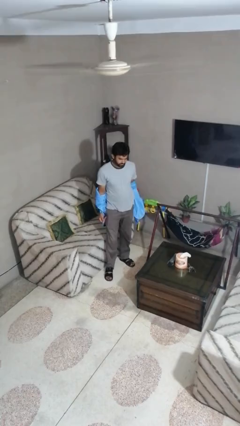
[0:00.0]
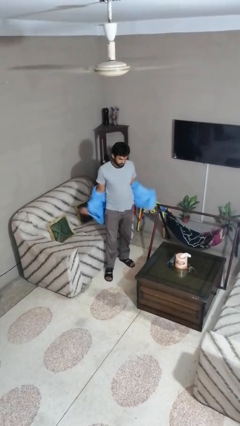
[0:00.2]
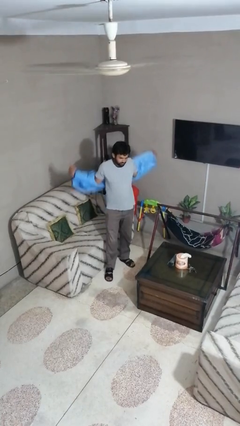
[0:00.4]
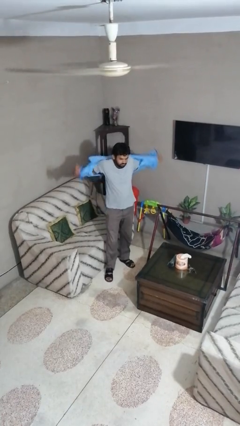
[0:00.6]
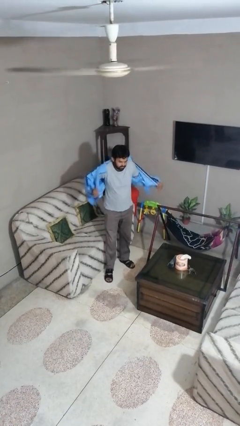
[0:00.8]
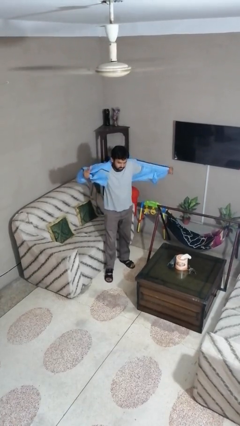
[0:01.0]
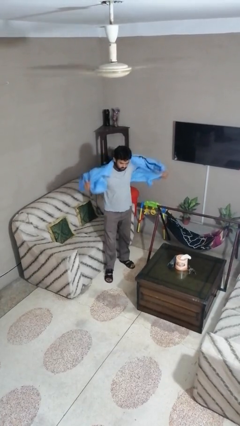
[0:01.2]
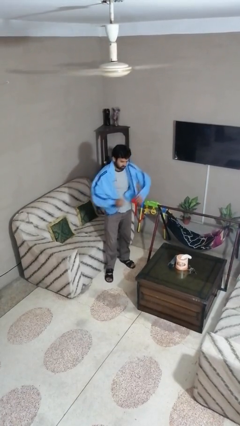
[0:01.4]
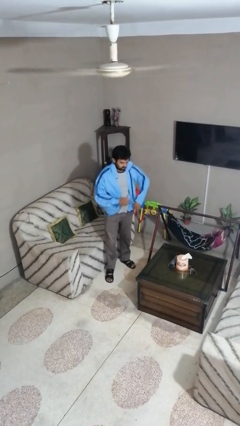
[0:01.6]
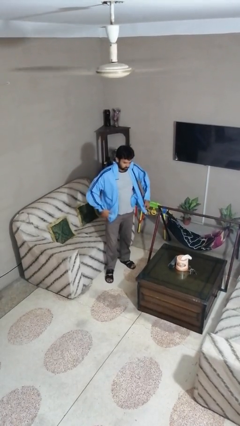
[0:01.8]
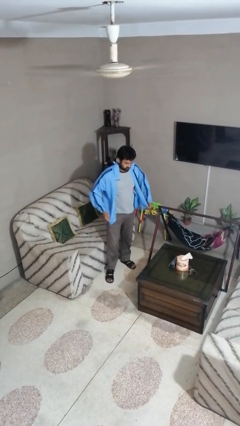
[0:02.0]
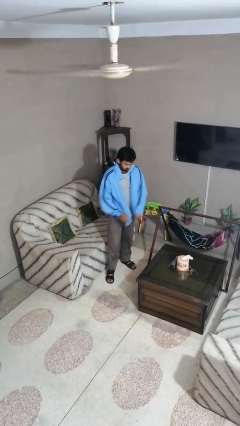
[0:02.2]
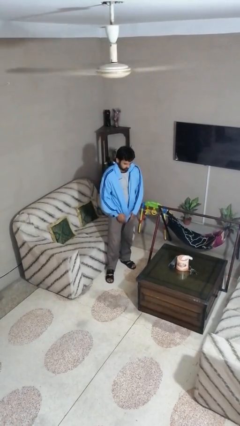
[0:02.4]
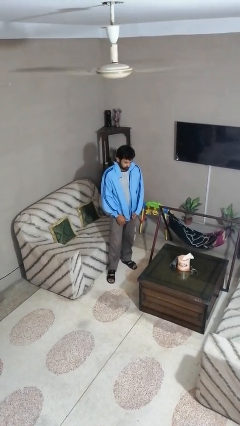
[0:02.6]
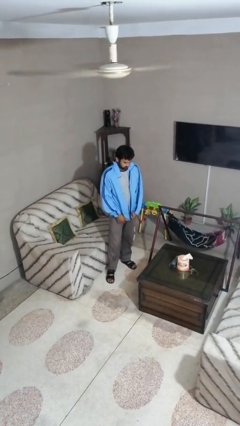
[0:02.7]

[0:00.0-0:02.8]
person puts on jacket

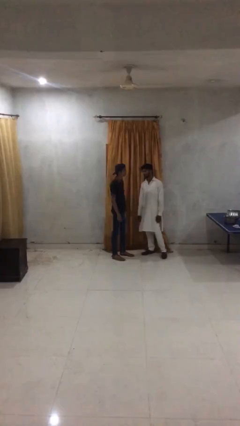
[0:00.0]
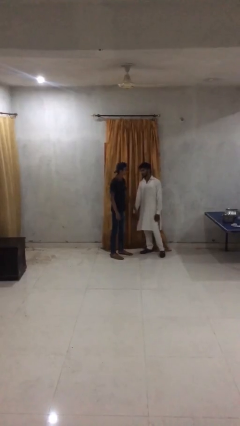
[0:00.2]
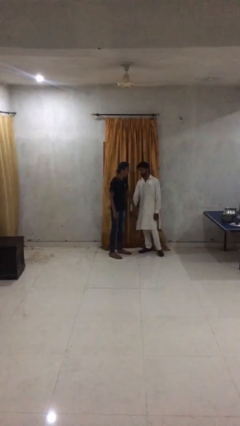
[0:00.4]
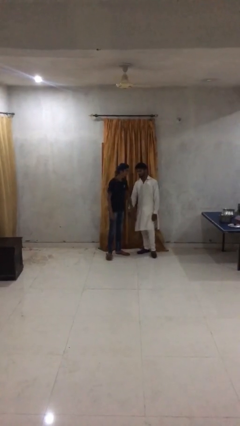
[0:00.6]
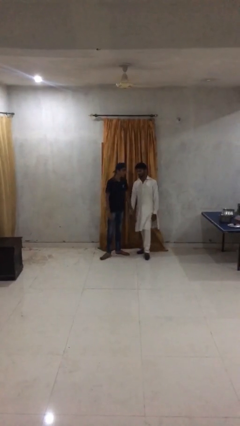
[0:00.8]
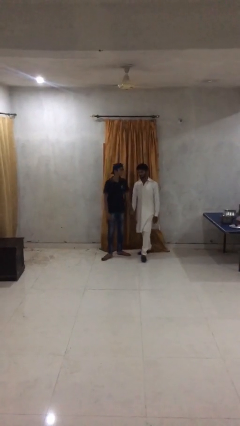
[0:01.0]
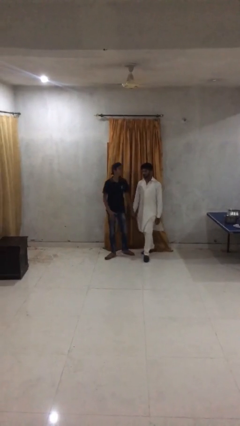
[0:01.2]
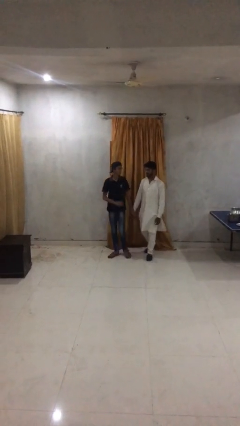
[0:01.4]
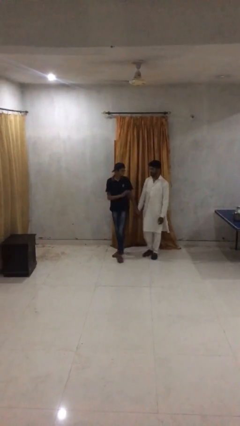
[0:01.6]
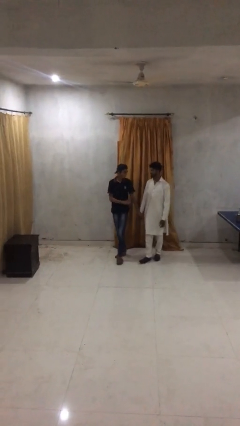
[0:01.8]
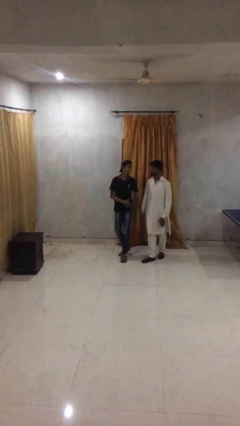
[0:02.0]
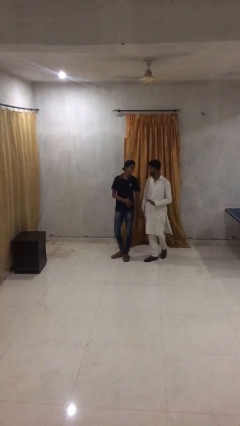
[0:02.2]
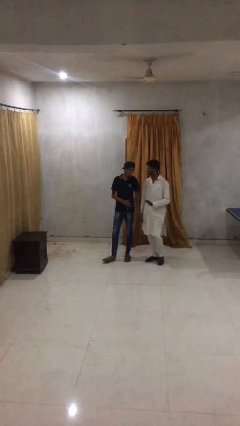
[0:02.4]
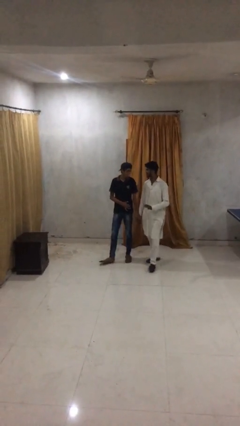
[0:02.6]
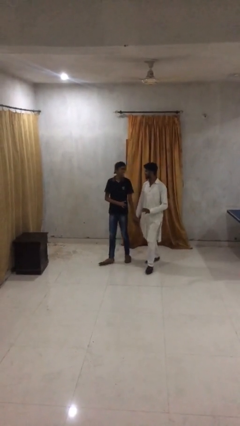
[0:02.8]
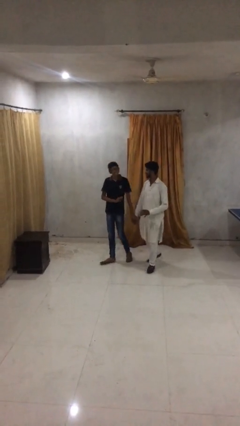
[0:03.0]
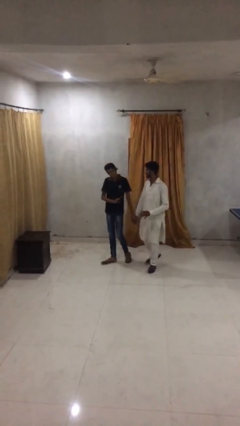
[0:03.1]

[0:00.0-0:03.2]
person holds hand

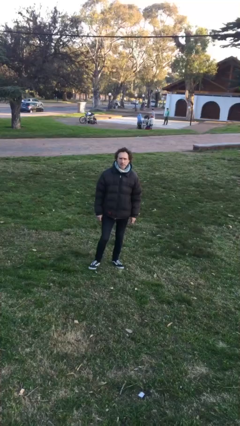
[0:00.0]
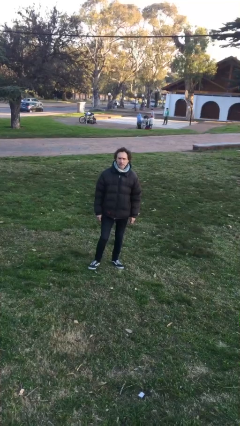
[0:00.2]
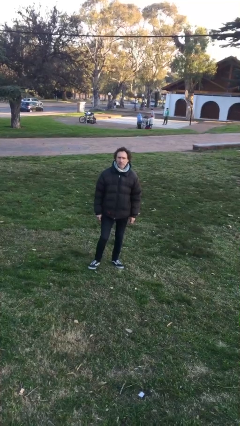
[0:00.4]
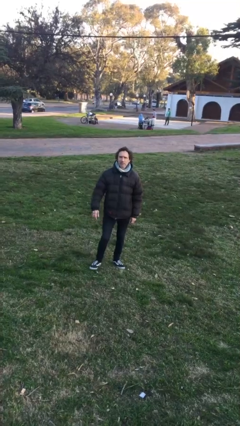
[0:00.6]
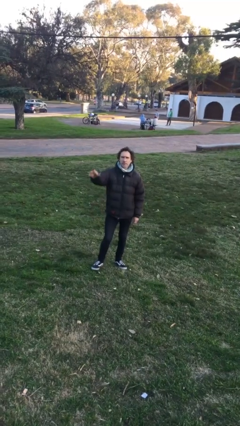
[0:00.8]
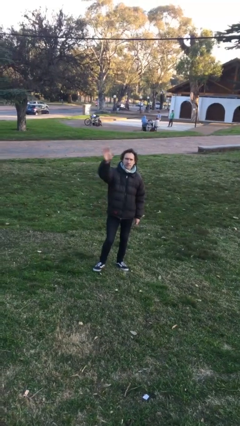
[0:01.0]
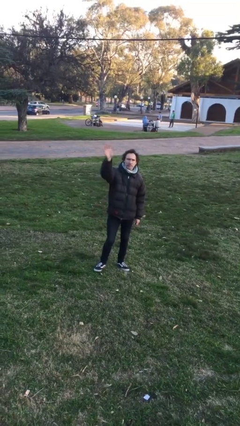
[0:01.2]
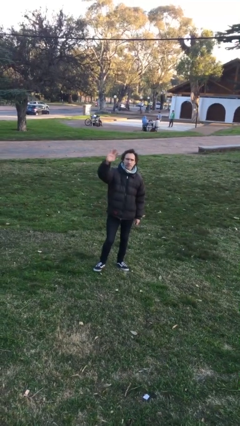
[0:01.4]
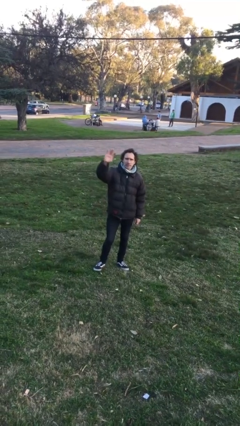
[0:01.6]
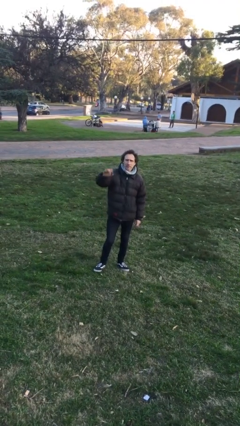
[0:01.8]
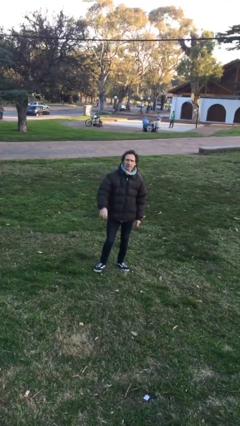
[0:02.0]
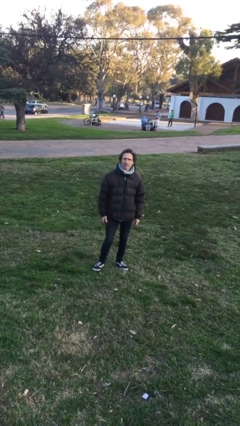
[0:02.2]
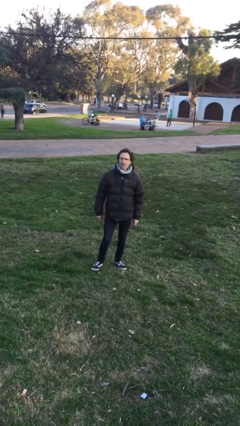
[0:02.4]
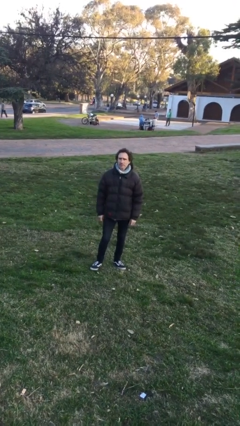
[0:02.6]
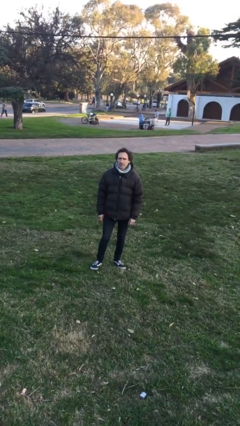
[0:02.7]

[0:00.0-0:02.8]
person waves at person

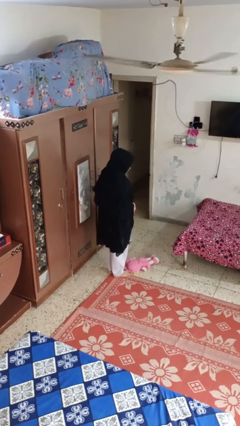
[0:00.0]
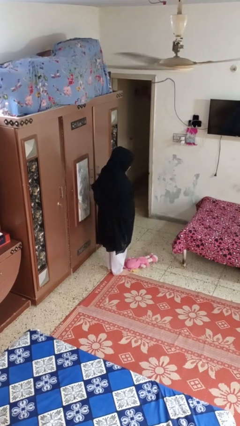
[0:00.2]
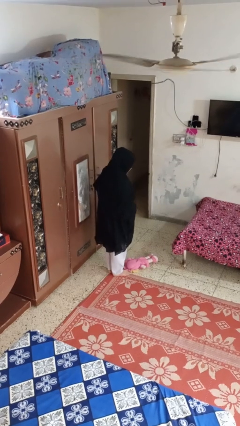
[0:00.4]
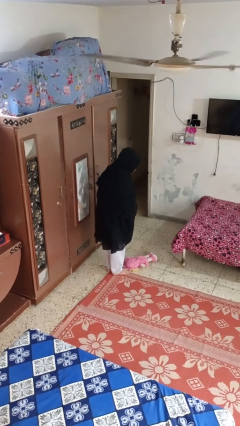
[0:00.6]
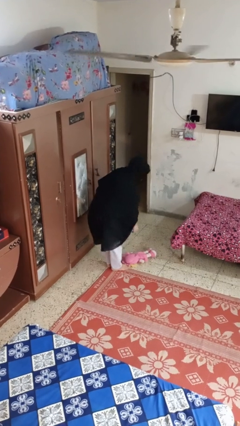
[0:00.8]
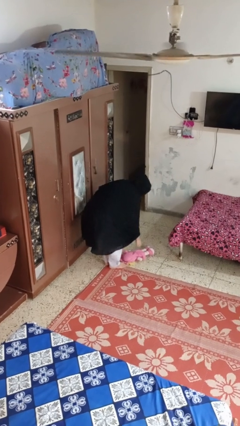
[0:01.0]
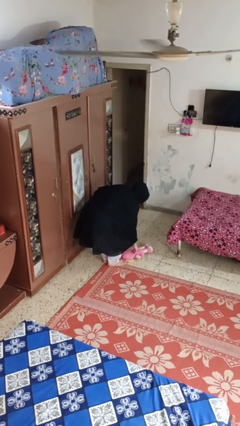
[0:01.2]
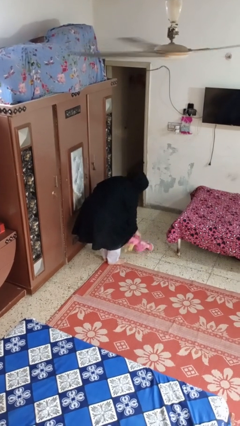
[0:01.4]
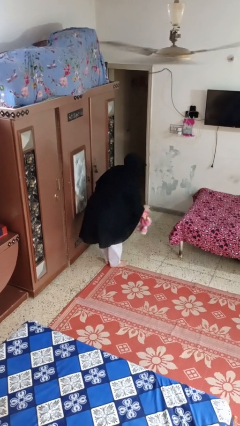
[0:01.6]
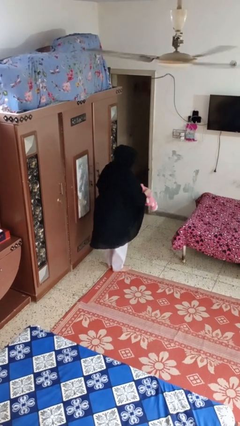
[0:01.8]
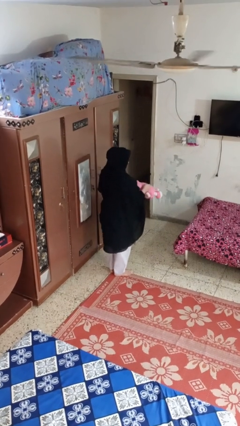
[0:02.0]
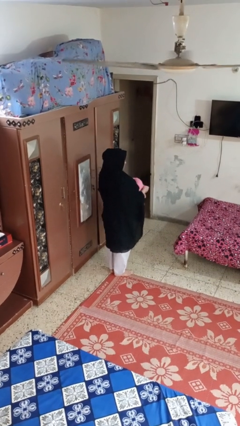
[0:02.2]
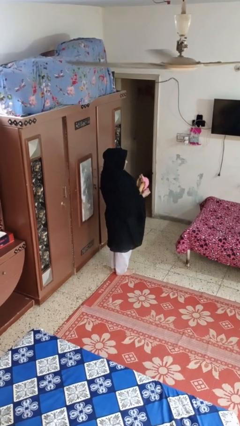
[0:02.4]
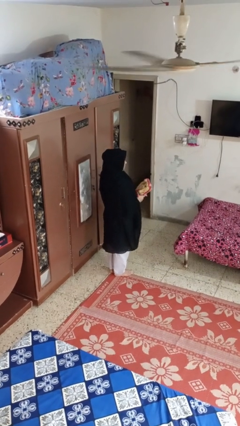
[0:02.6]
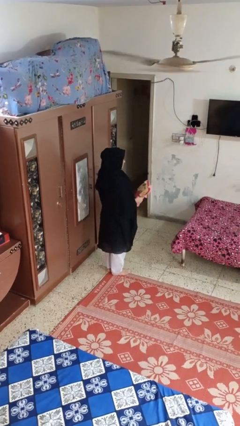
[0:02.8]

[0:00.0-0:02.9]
person picks up object from floor

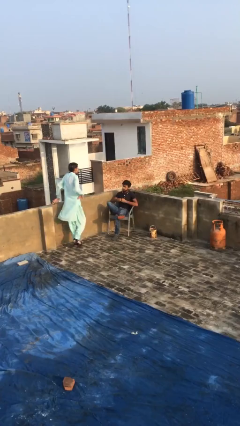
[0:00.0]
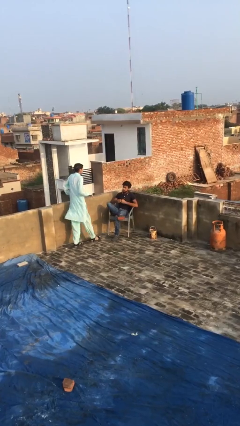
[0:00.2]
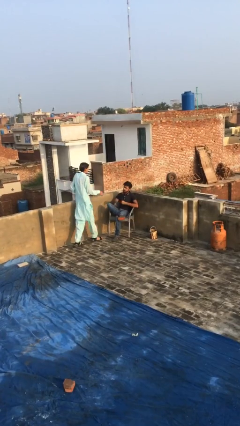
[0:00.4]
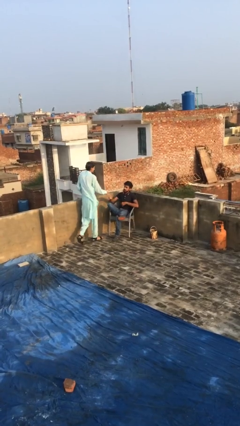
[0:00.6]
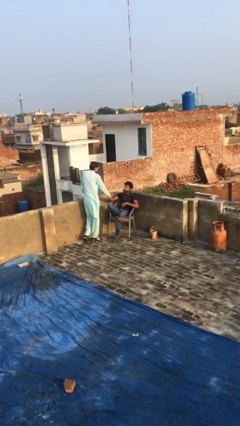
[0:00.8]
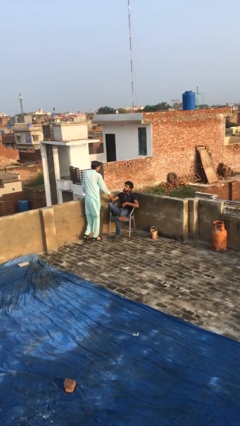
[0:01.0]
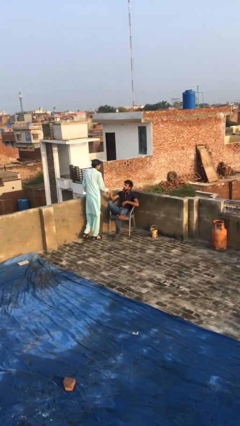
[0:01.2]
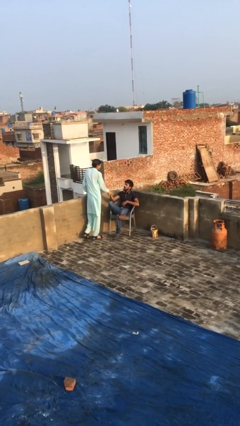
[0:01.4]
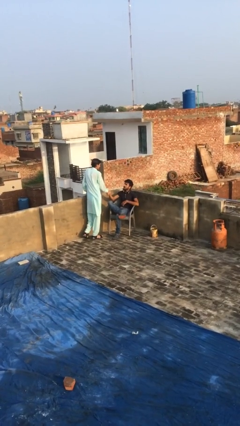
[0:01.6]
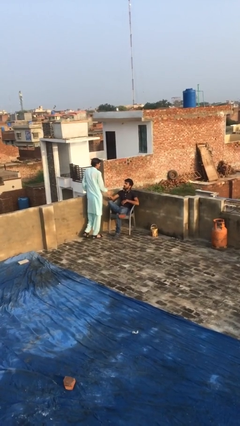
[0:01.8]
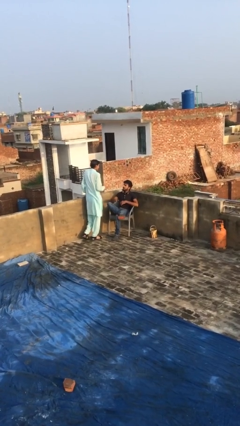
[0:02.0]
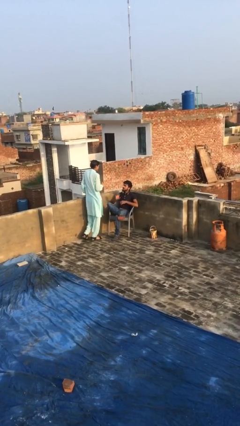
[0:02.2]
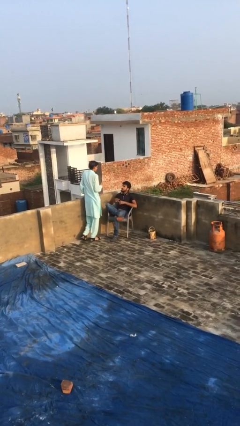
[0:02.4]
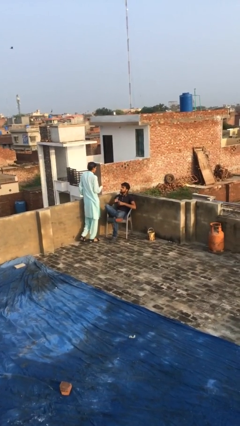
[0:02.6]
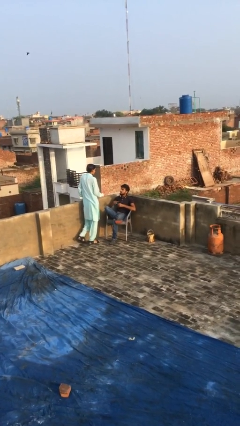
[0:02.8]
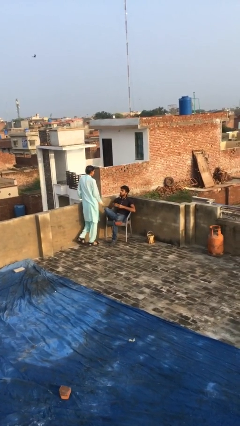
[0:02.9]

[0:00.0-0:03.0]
person shakes hand

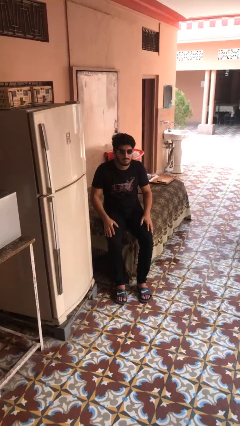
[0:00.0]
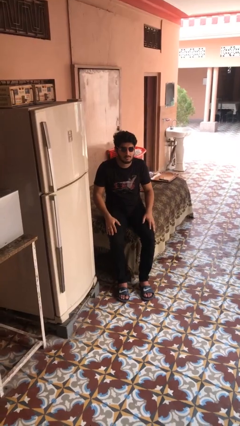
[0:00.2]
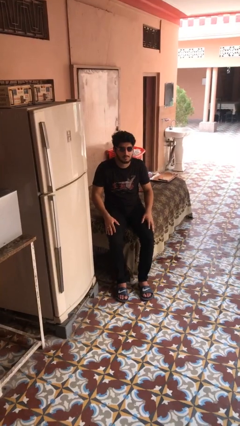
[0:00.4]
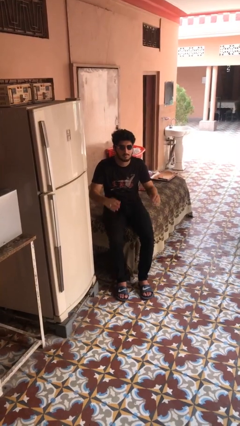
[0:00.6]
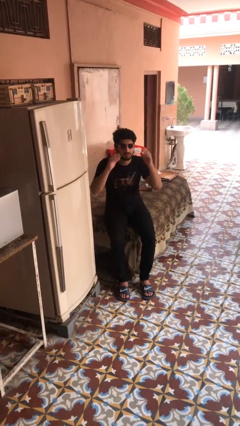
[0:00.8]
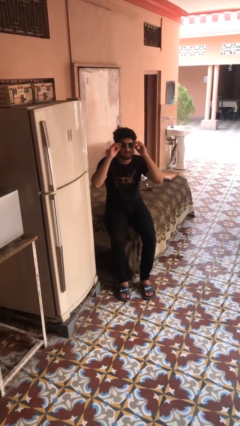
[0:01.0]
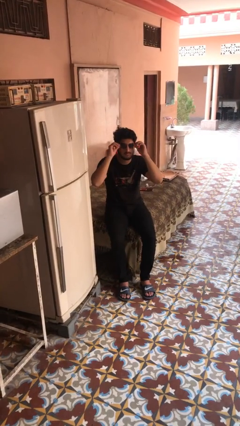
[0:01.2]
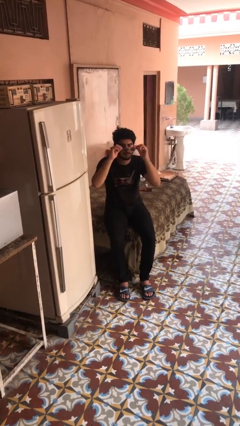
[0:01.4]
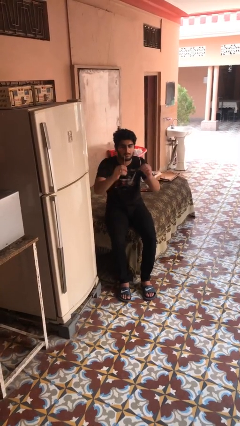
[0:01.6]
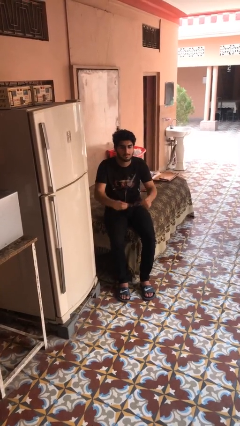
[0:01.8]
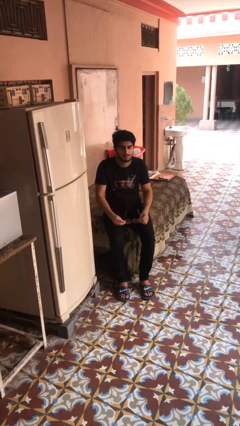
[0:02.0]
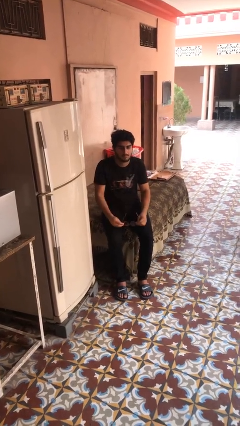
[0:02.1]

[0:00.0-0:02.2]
person takes off sunglasses

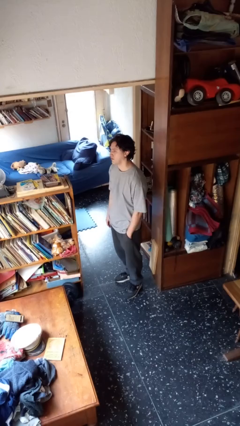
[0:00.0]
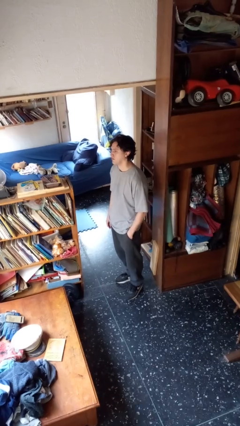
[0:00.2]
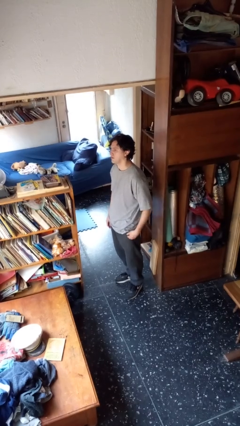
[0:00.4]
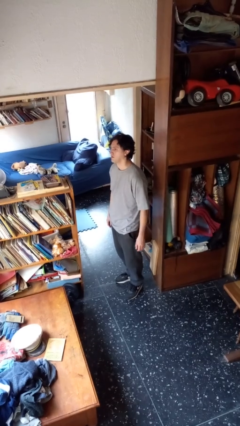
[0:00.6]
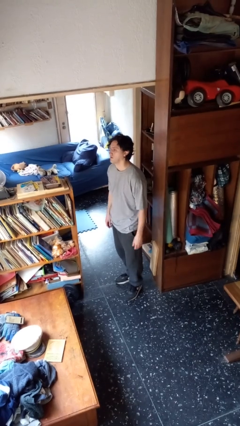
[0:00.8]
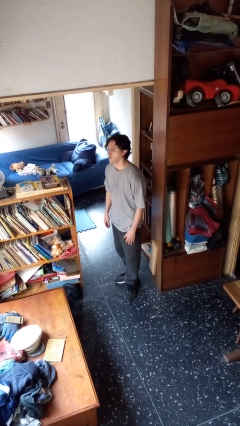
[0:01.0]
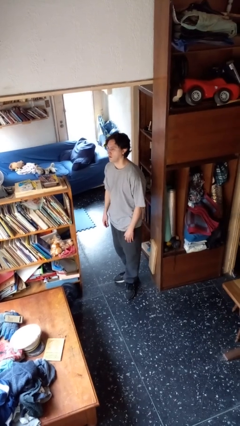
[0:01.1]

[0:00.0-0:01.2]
person puts hands in back pockets
